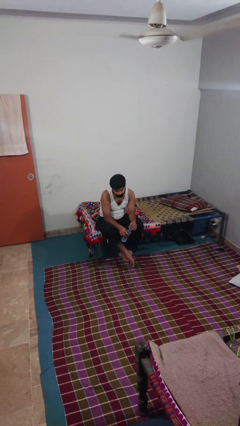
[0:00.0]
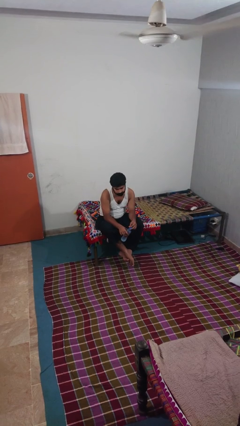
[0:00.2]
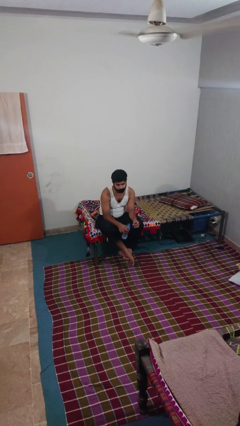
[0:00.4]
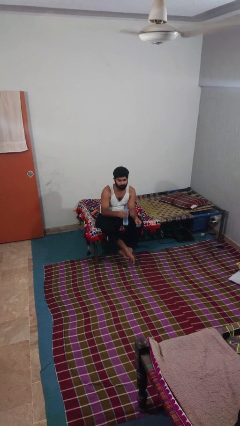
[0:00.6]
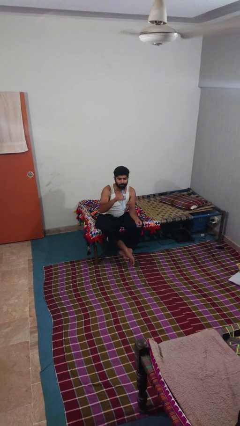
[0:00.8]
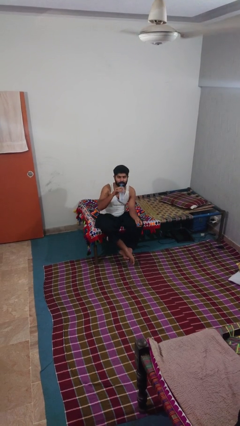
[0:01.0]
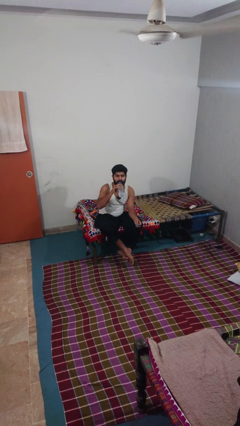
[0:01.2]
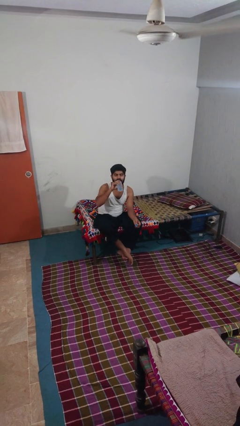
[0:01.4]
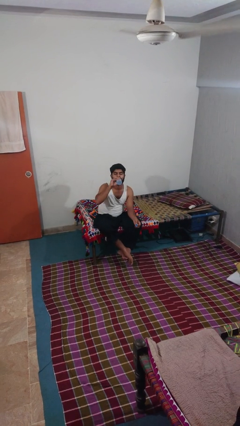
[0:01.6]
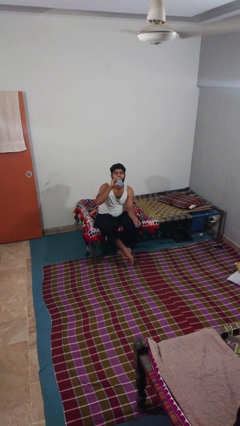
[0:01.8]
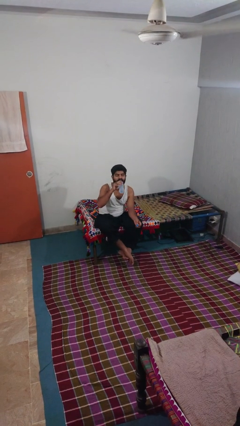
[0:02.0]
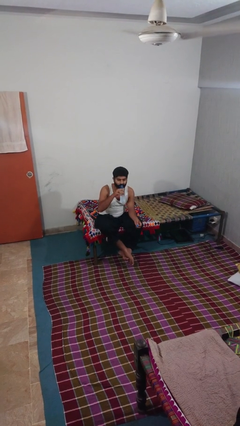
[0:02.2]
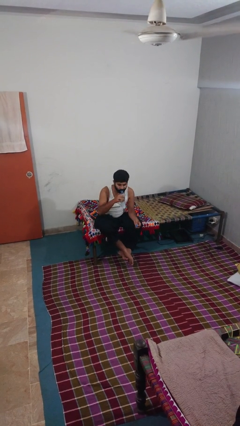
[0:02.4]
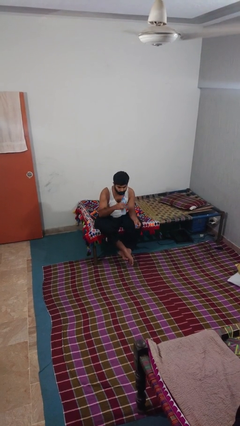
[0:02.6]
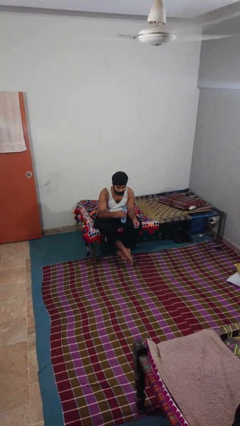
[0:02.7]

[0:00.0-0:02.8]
person drinks from bottle

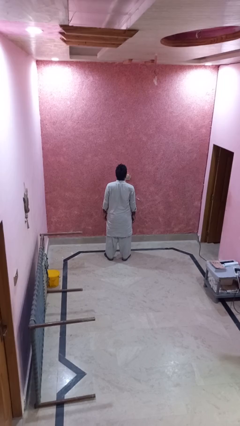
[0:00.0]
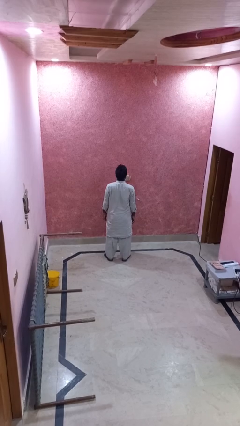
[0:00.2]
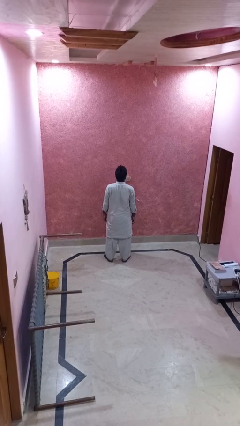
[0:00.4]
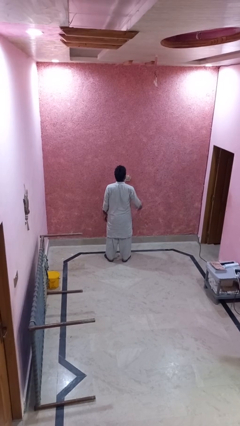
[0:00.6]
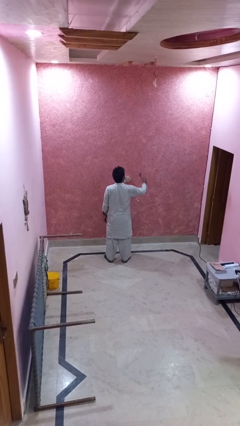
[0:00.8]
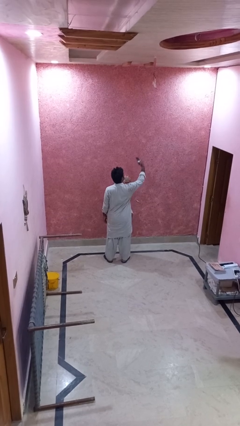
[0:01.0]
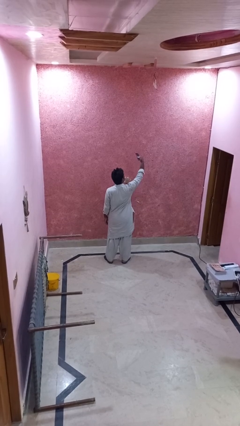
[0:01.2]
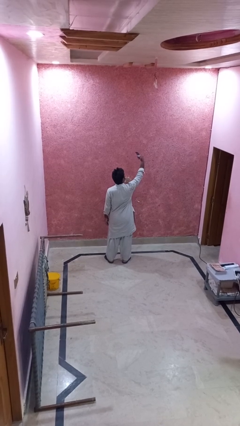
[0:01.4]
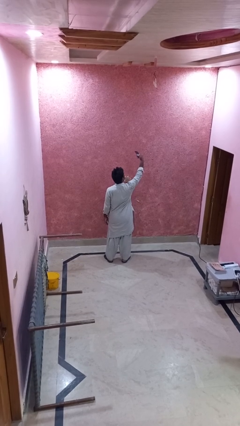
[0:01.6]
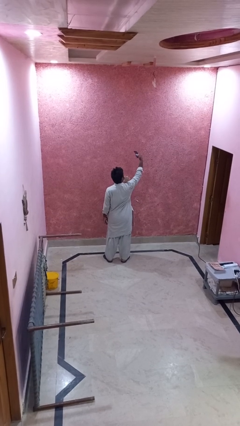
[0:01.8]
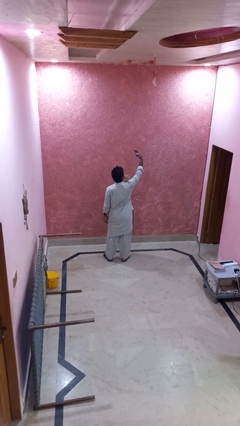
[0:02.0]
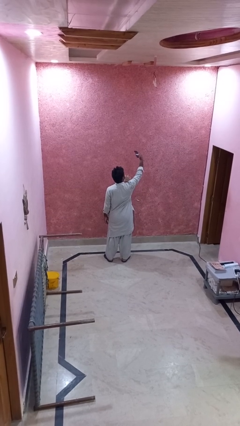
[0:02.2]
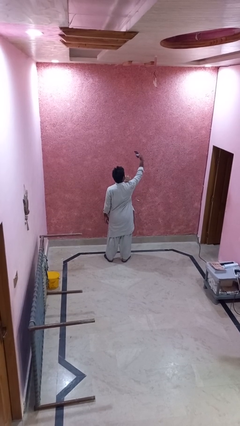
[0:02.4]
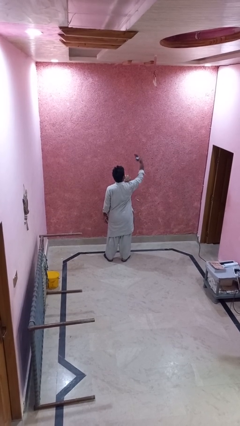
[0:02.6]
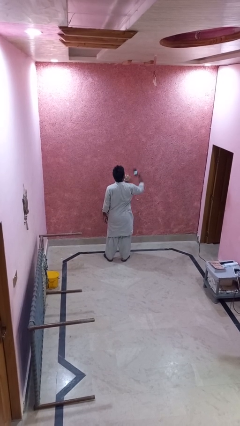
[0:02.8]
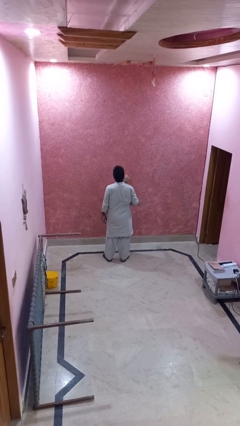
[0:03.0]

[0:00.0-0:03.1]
person takes selfie

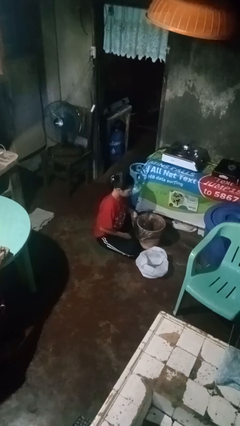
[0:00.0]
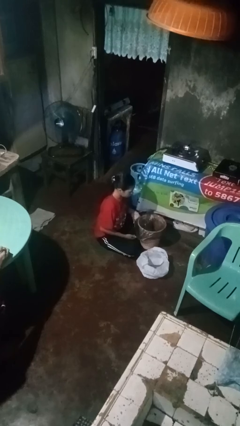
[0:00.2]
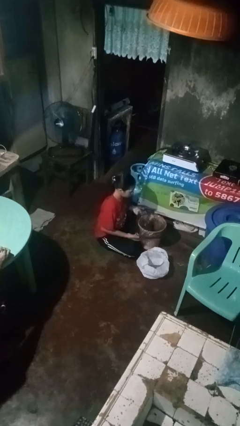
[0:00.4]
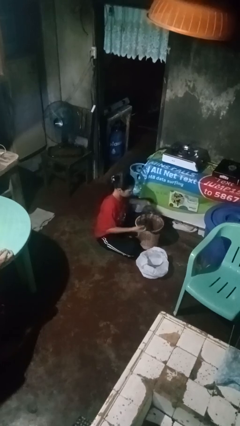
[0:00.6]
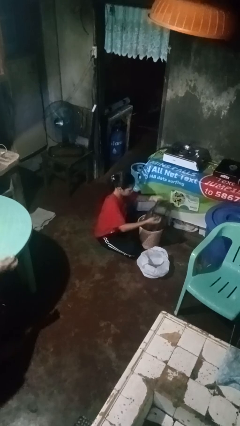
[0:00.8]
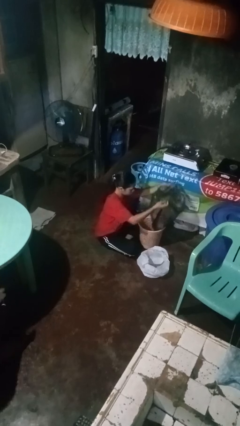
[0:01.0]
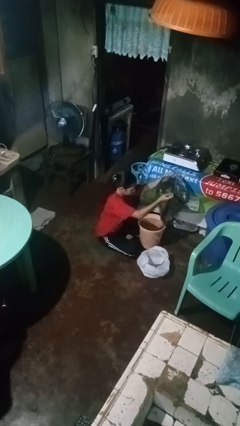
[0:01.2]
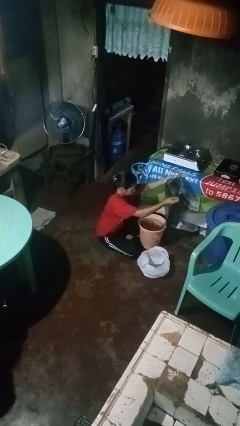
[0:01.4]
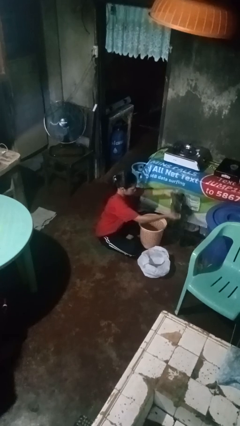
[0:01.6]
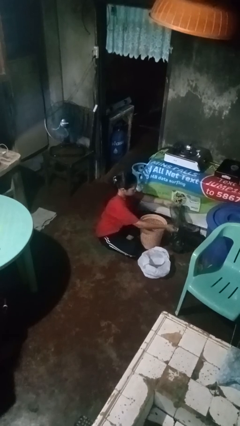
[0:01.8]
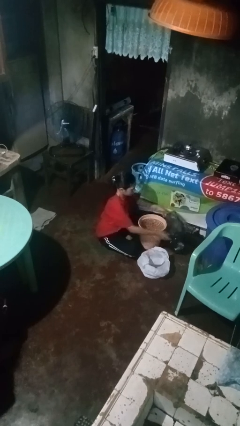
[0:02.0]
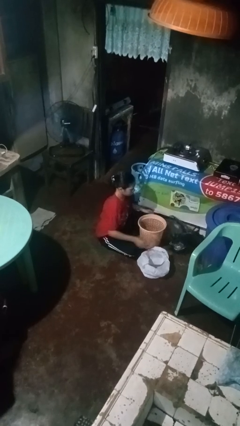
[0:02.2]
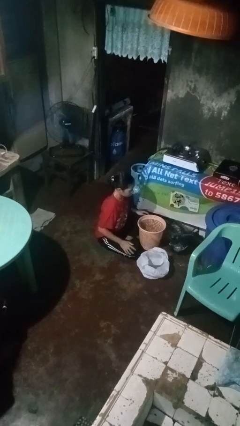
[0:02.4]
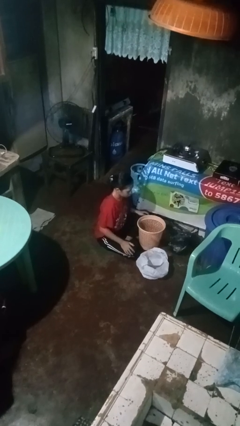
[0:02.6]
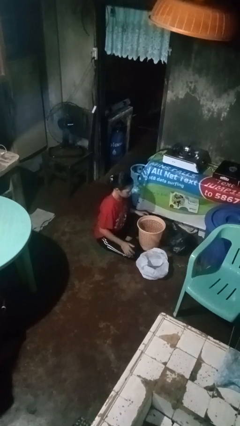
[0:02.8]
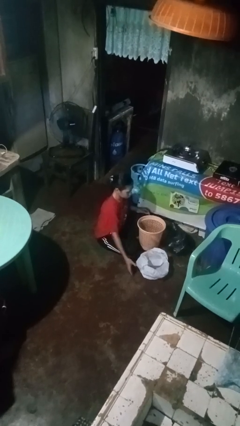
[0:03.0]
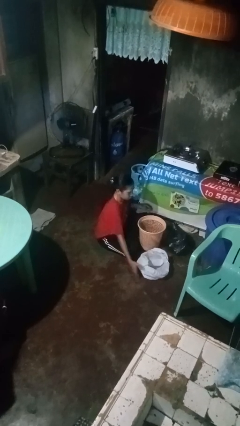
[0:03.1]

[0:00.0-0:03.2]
person removes trashbag from trashcan

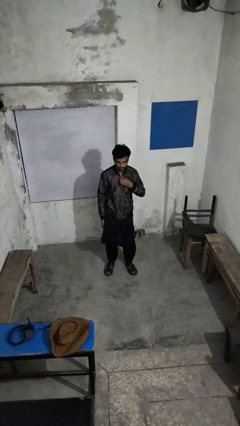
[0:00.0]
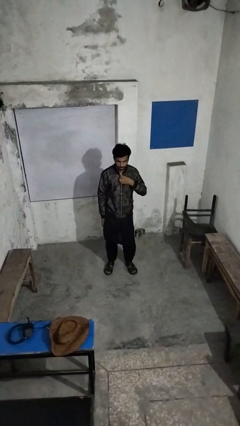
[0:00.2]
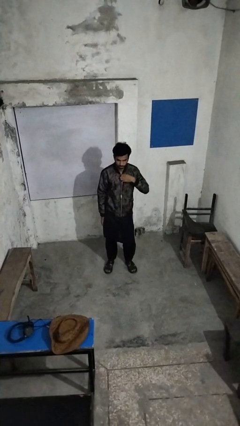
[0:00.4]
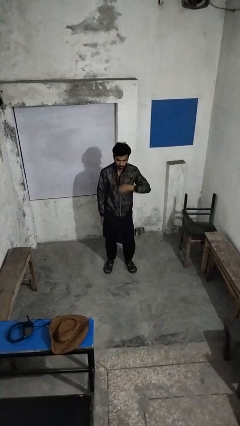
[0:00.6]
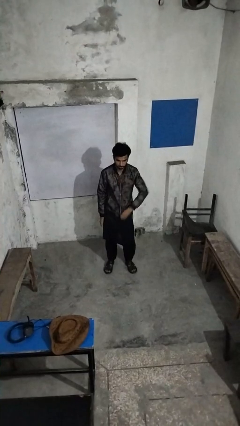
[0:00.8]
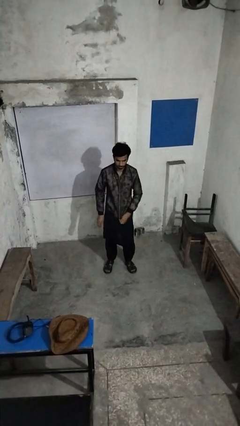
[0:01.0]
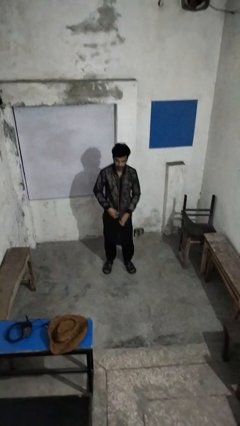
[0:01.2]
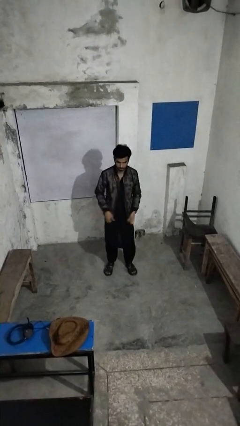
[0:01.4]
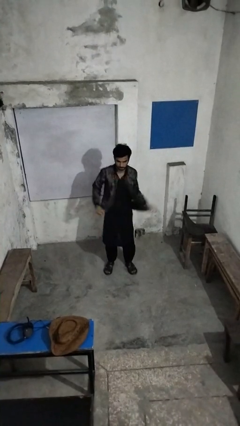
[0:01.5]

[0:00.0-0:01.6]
person unzips jacket

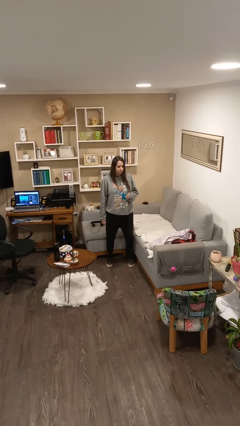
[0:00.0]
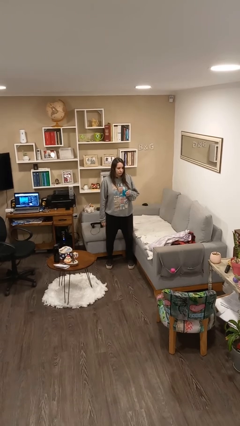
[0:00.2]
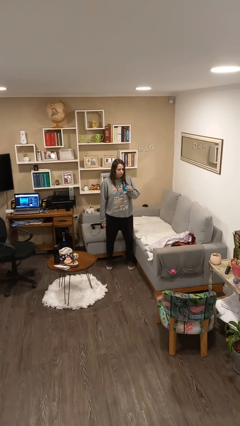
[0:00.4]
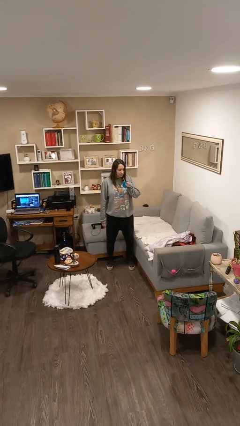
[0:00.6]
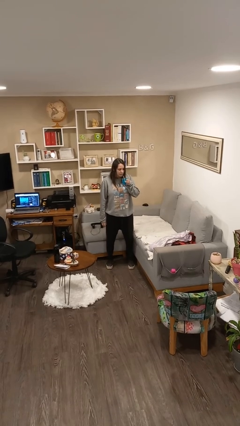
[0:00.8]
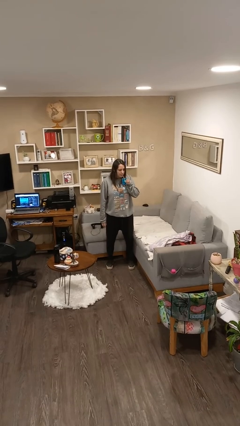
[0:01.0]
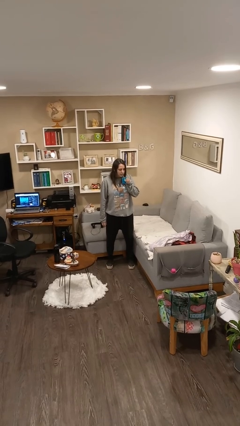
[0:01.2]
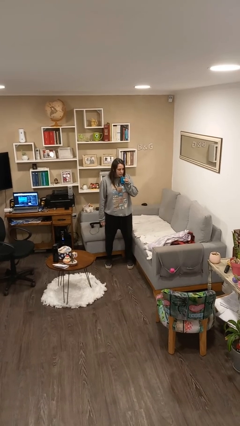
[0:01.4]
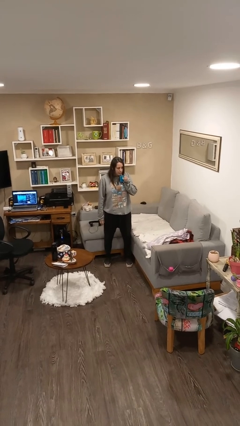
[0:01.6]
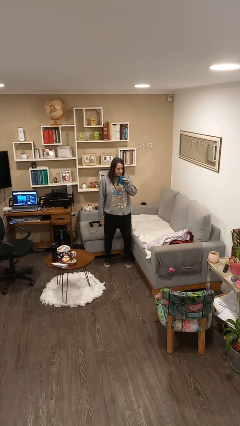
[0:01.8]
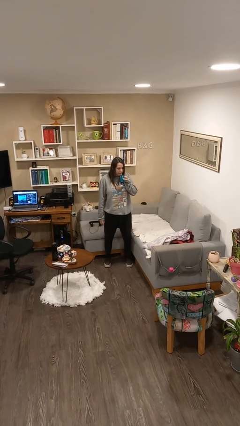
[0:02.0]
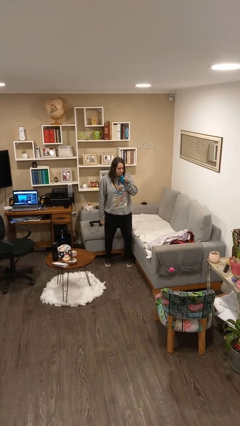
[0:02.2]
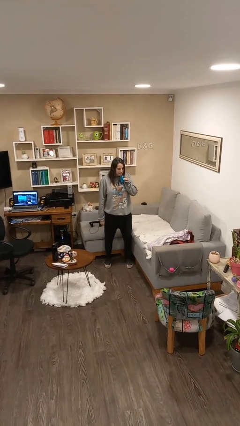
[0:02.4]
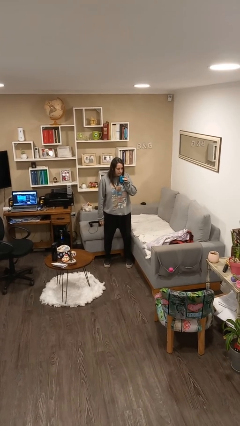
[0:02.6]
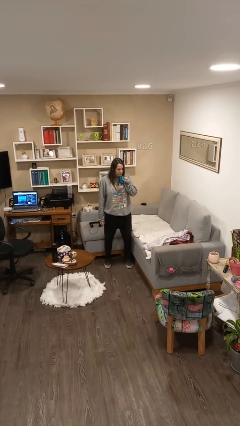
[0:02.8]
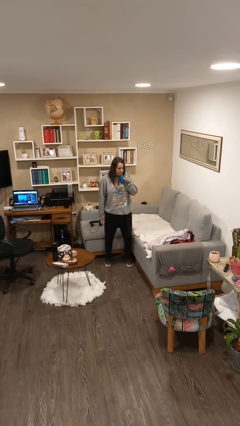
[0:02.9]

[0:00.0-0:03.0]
person drinks from straw

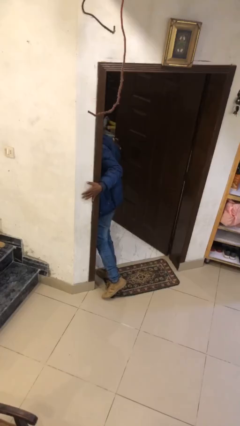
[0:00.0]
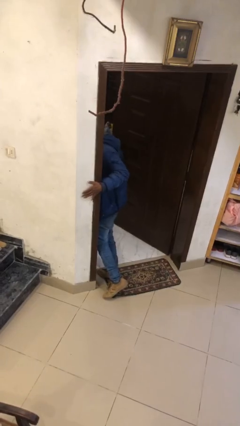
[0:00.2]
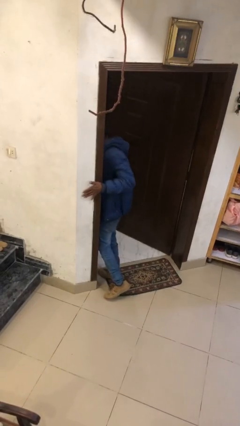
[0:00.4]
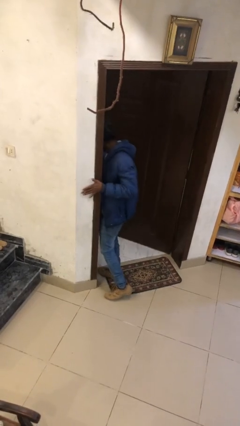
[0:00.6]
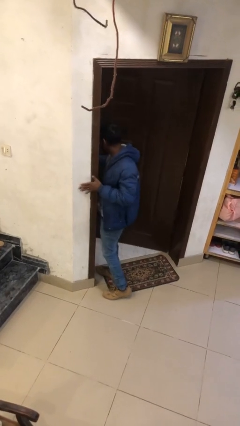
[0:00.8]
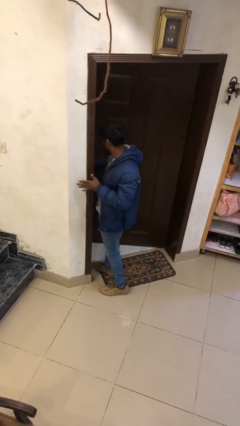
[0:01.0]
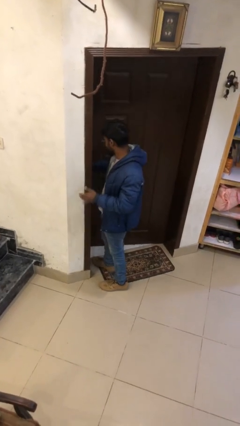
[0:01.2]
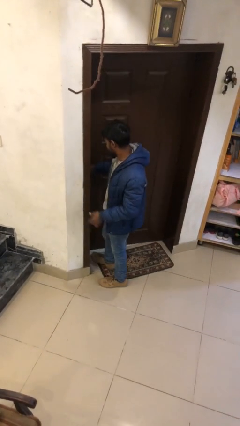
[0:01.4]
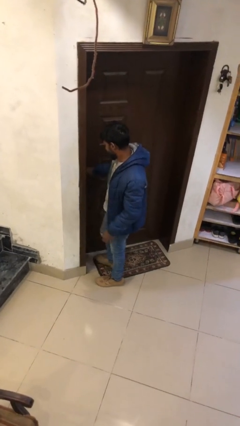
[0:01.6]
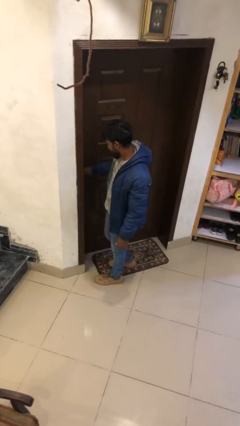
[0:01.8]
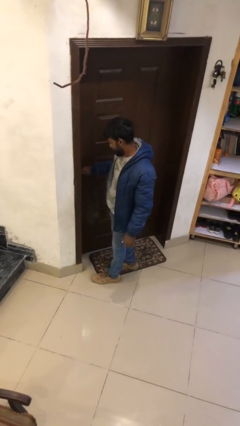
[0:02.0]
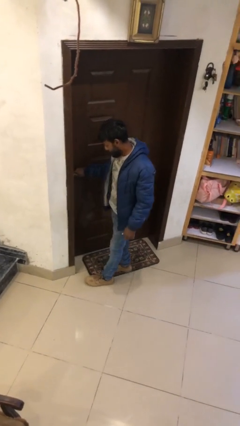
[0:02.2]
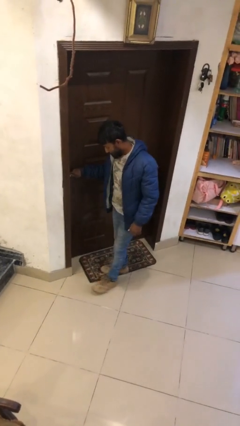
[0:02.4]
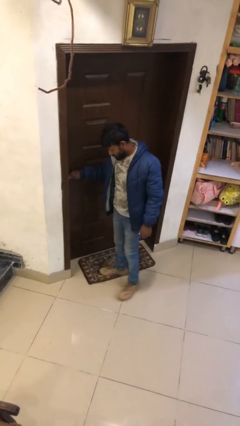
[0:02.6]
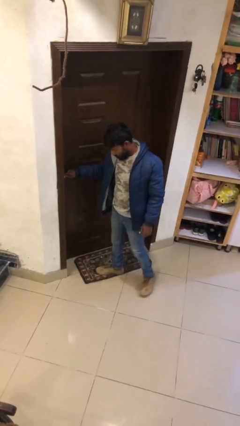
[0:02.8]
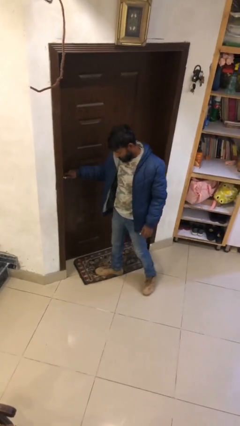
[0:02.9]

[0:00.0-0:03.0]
person closes facility door

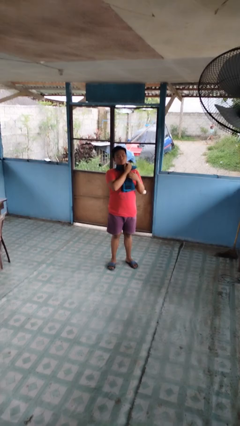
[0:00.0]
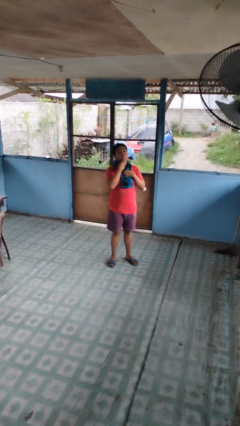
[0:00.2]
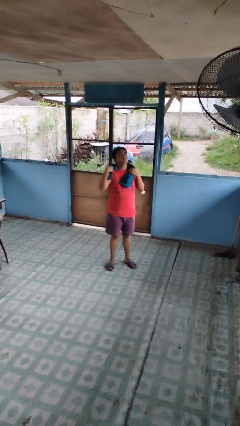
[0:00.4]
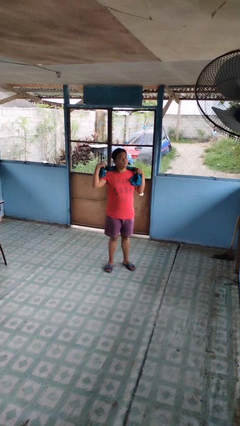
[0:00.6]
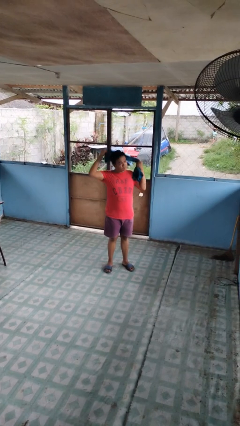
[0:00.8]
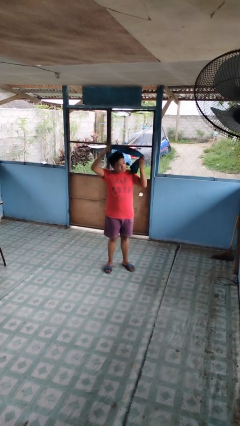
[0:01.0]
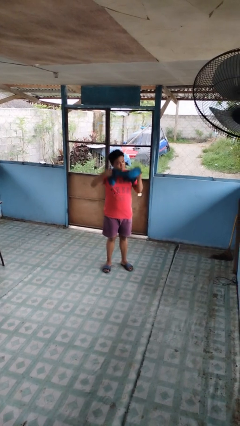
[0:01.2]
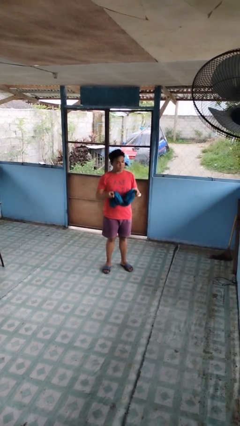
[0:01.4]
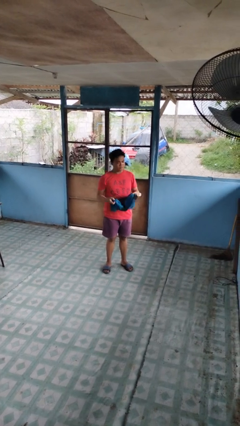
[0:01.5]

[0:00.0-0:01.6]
person takes off scarf
